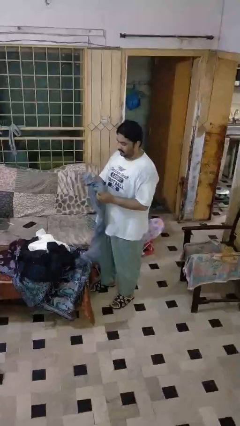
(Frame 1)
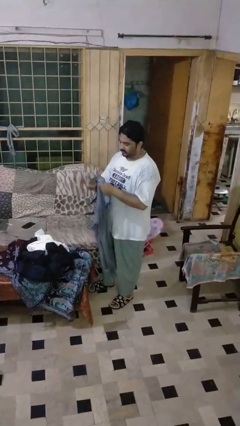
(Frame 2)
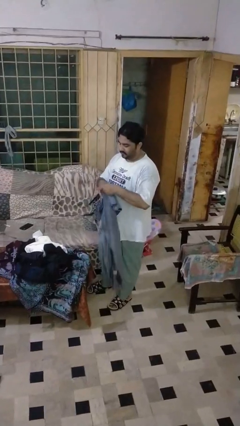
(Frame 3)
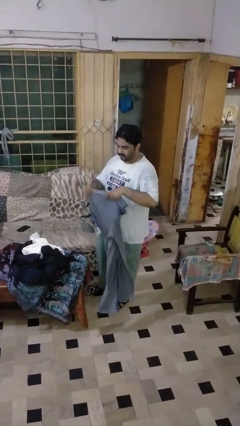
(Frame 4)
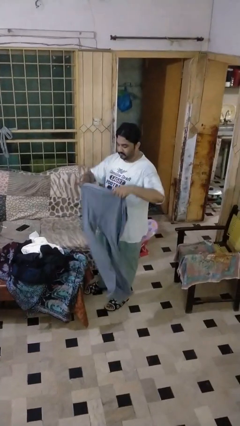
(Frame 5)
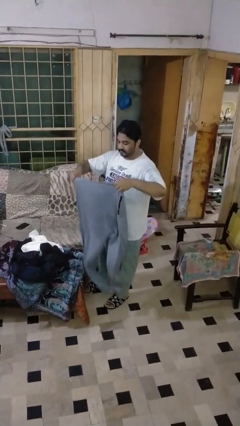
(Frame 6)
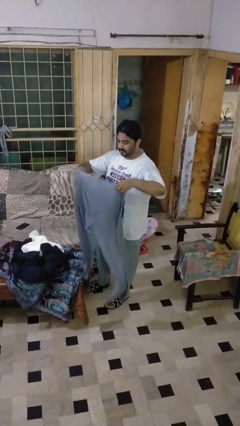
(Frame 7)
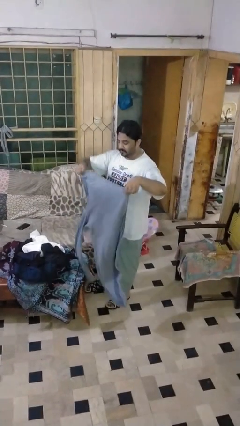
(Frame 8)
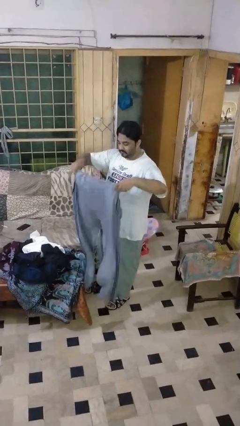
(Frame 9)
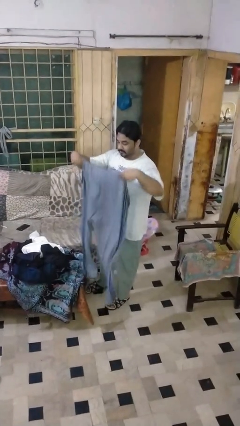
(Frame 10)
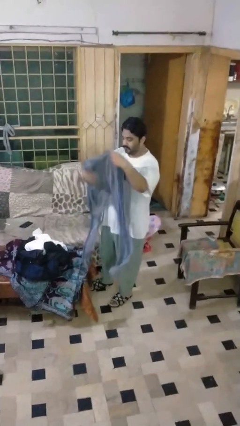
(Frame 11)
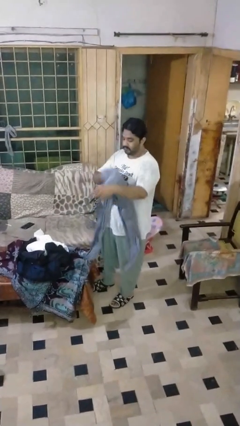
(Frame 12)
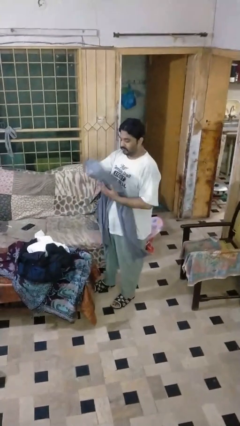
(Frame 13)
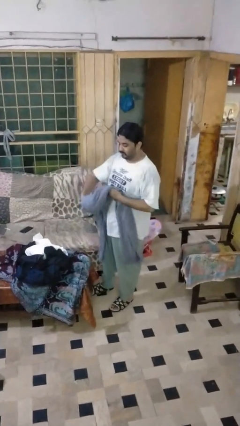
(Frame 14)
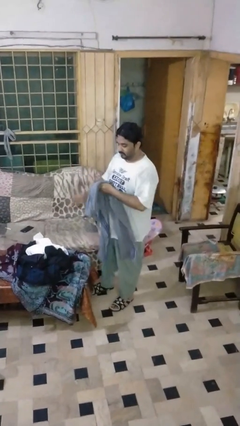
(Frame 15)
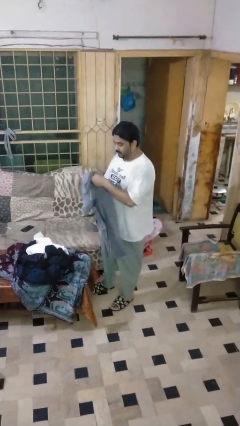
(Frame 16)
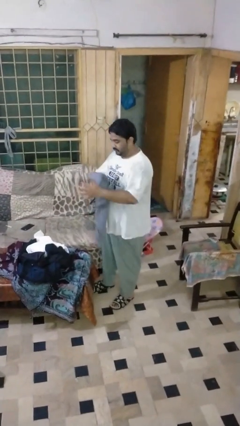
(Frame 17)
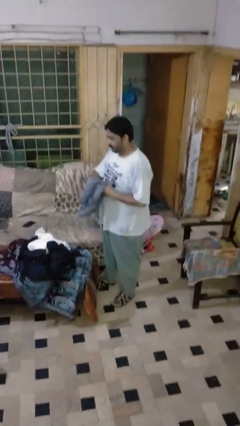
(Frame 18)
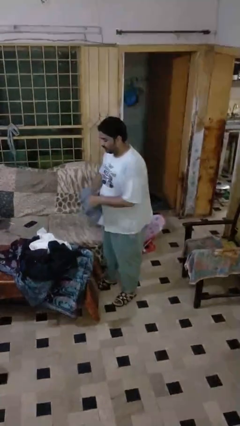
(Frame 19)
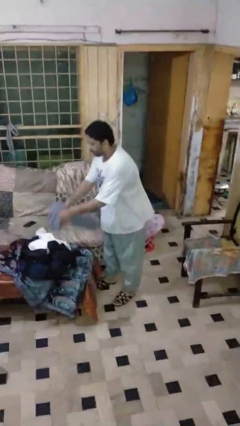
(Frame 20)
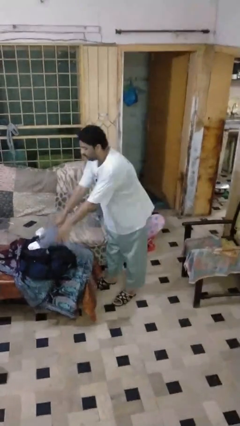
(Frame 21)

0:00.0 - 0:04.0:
person folds pants

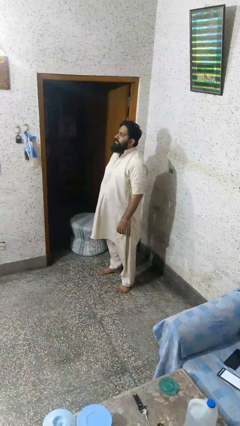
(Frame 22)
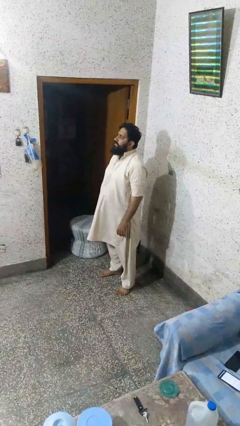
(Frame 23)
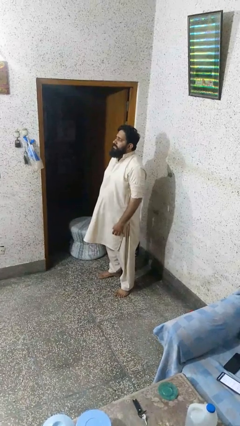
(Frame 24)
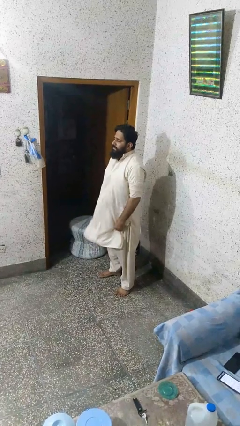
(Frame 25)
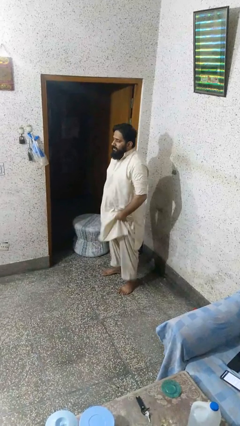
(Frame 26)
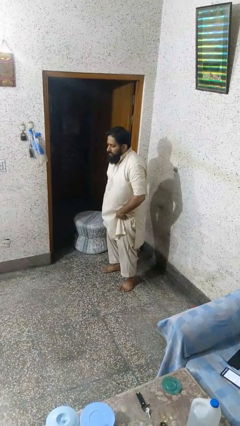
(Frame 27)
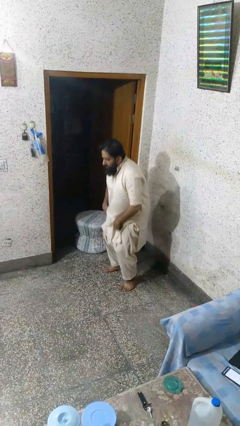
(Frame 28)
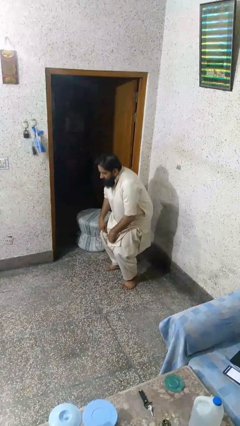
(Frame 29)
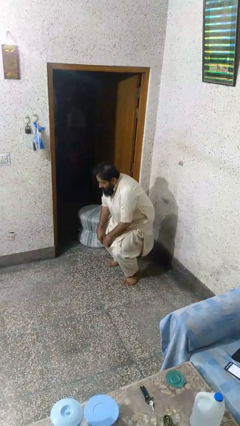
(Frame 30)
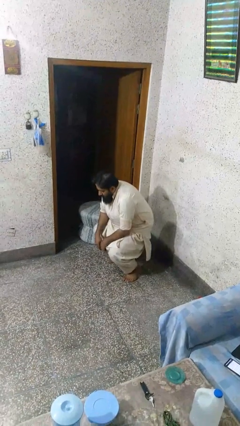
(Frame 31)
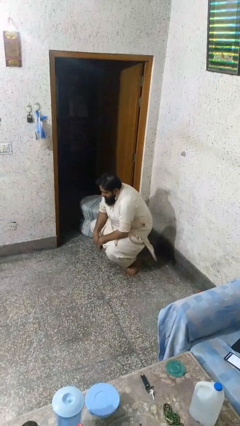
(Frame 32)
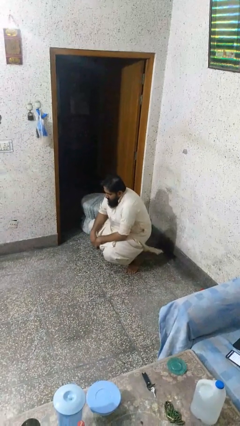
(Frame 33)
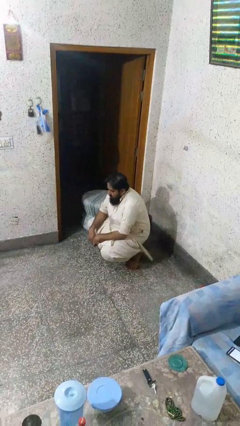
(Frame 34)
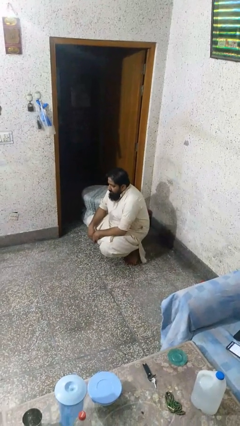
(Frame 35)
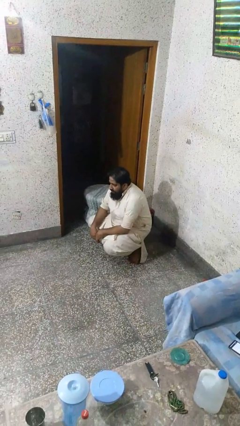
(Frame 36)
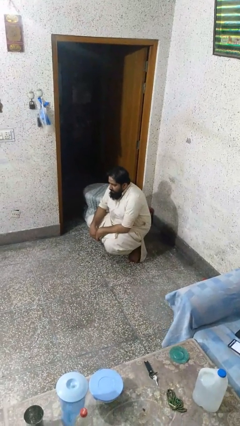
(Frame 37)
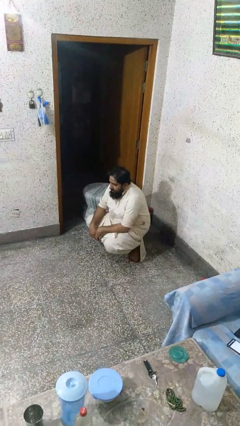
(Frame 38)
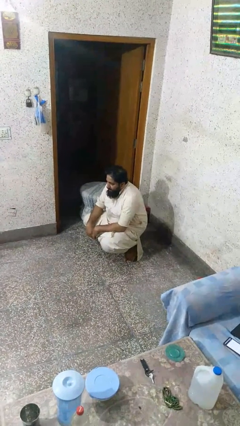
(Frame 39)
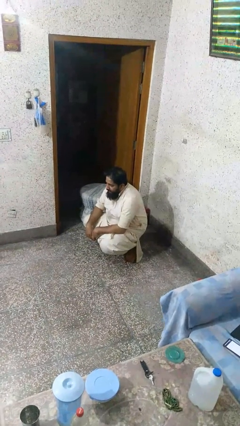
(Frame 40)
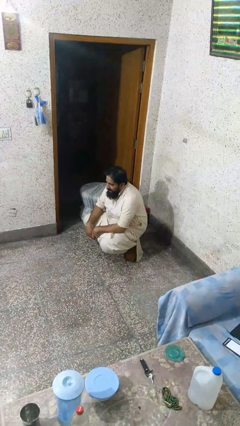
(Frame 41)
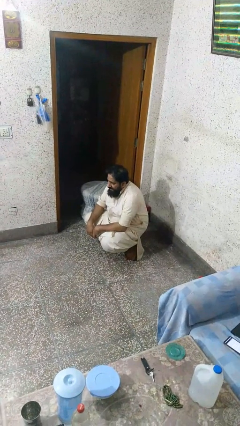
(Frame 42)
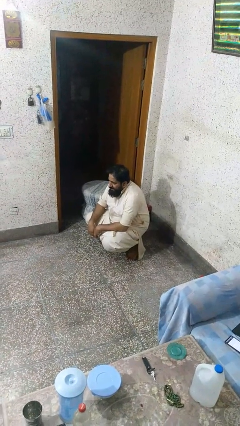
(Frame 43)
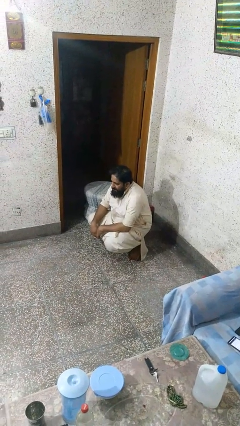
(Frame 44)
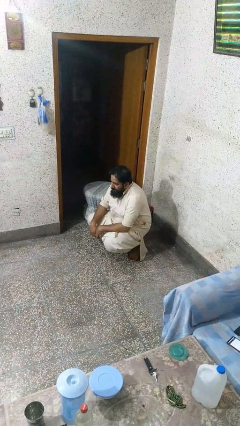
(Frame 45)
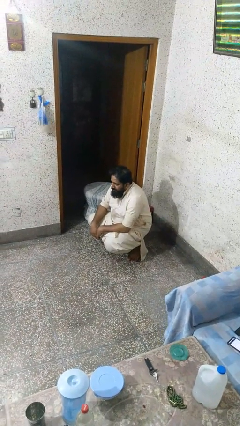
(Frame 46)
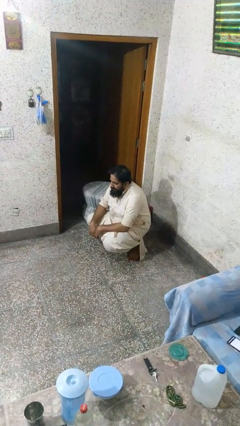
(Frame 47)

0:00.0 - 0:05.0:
person squats

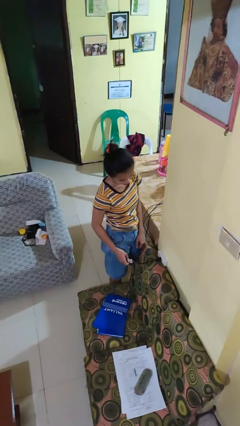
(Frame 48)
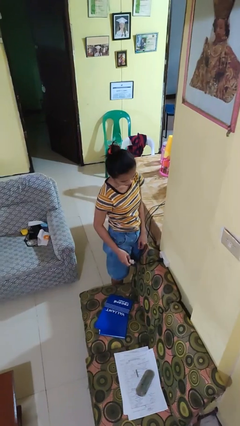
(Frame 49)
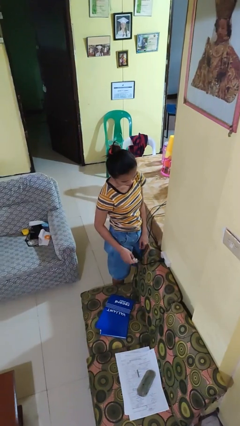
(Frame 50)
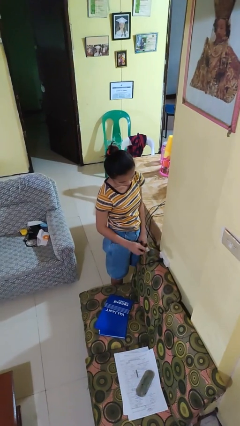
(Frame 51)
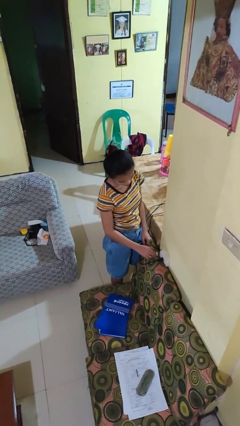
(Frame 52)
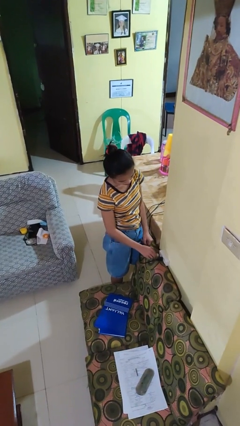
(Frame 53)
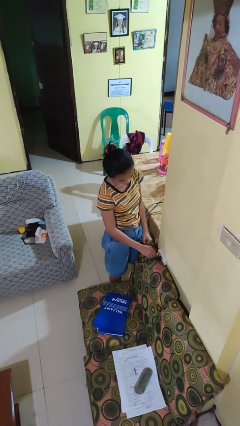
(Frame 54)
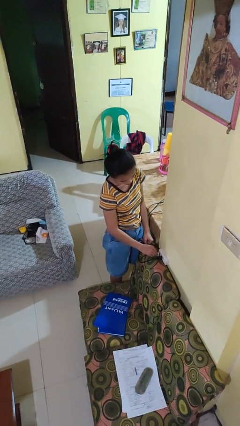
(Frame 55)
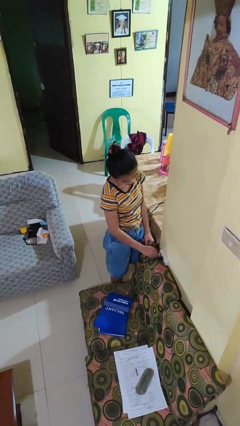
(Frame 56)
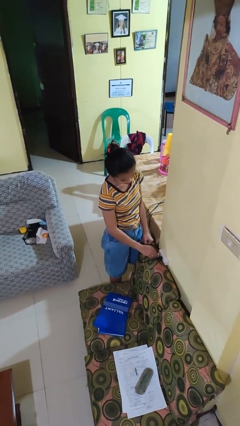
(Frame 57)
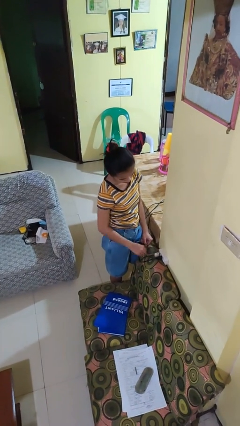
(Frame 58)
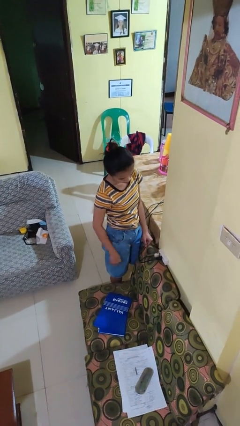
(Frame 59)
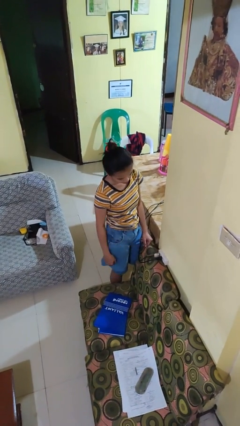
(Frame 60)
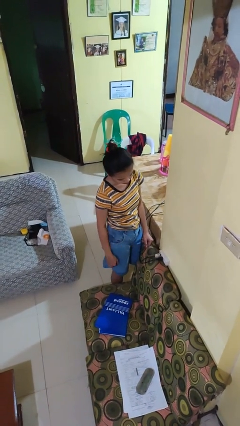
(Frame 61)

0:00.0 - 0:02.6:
person plugs into electrical socket

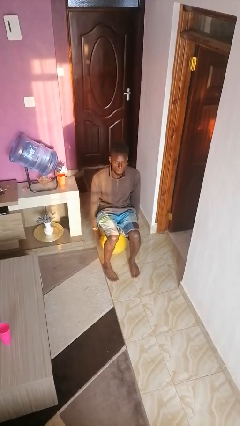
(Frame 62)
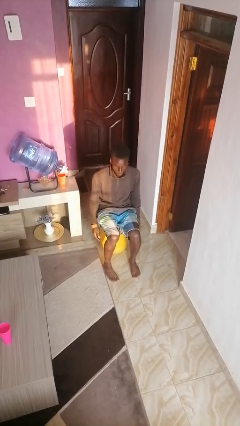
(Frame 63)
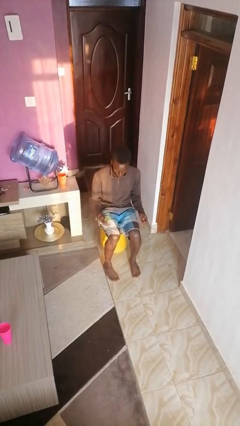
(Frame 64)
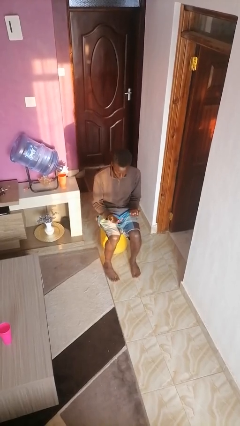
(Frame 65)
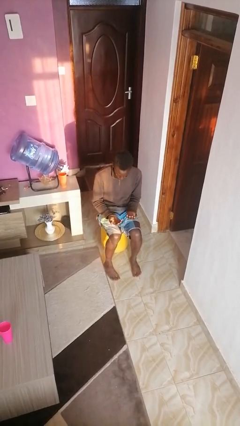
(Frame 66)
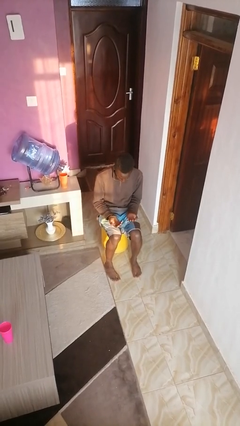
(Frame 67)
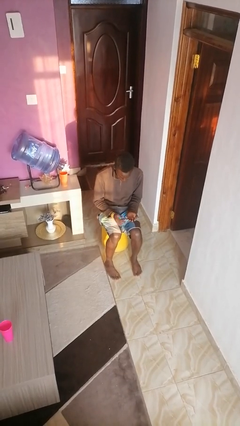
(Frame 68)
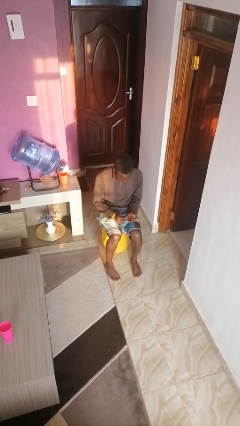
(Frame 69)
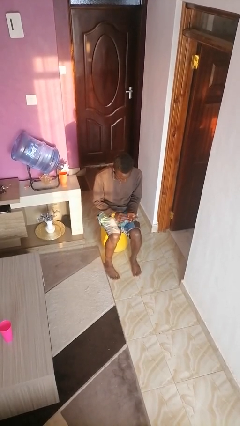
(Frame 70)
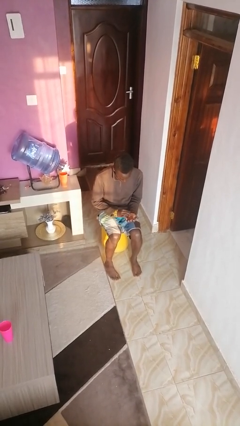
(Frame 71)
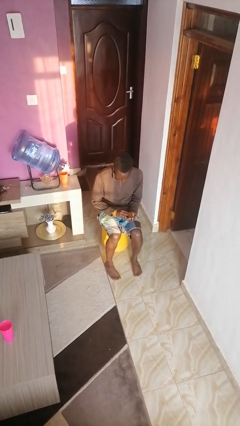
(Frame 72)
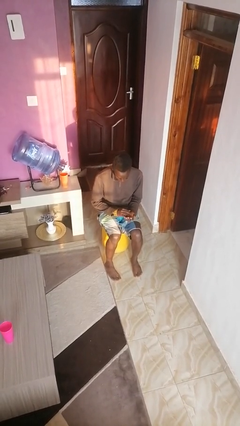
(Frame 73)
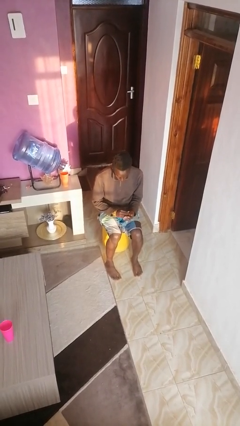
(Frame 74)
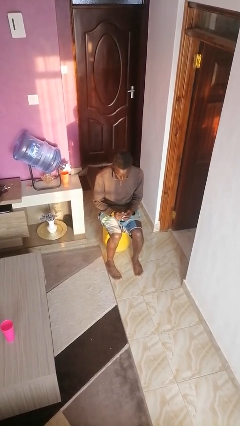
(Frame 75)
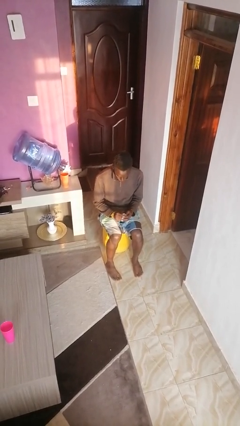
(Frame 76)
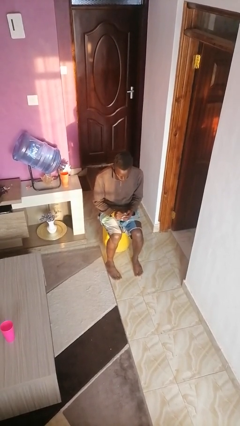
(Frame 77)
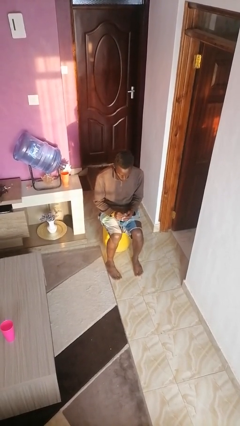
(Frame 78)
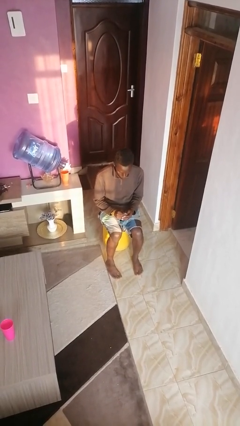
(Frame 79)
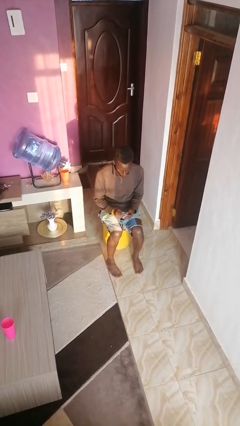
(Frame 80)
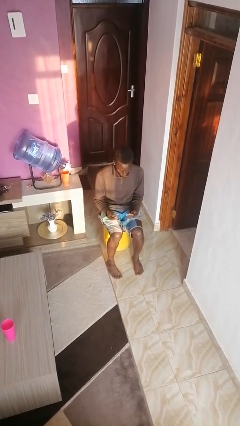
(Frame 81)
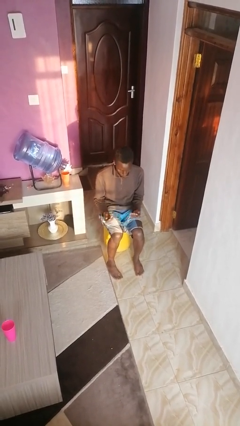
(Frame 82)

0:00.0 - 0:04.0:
person looks at hands in lap

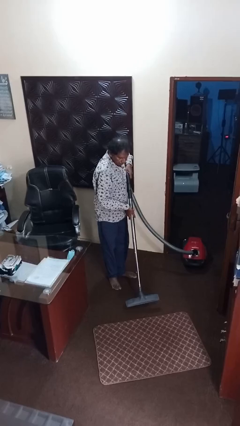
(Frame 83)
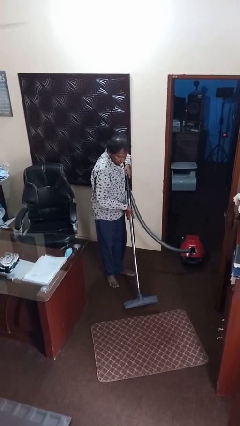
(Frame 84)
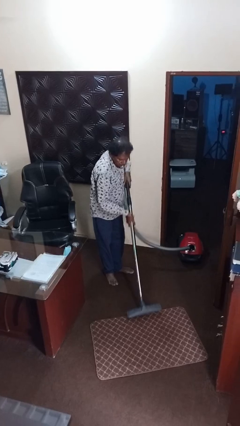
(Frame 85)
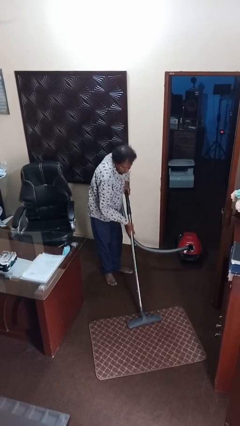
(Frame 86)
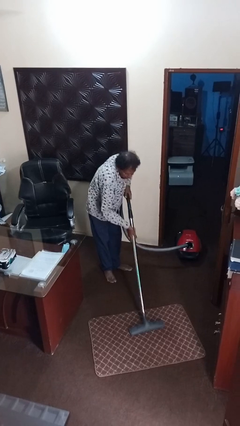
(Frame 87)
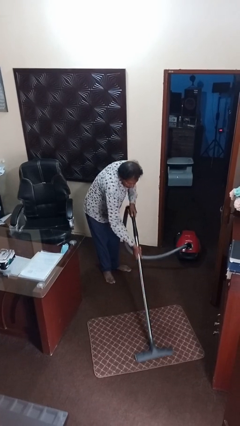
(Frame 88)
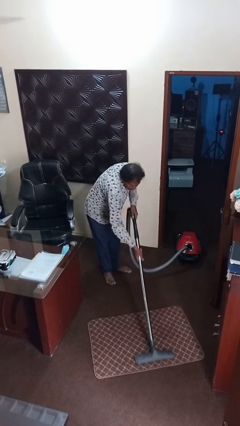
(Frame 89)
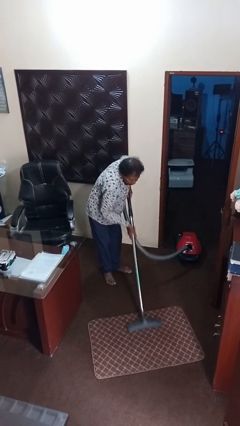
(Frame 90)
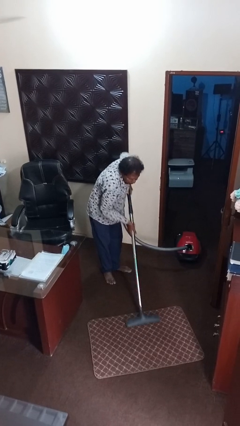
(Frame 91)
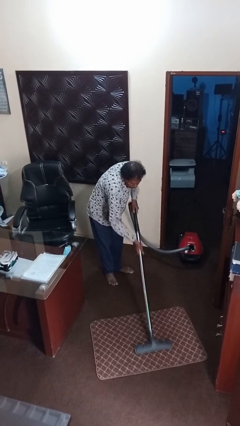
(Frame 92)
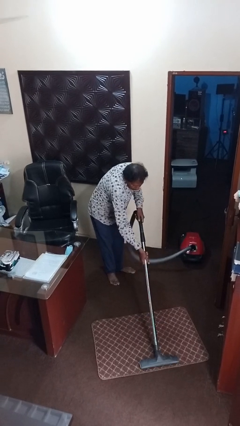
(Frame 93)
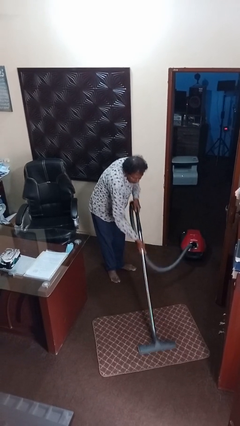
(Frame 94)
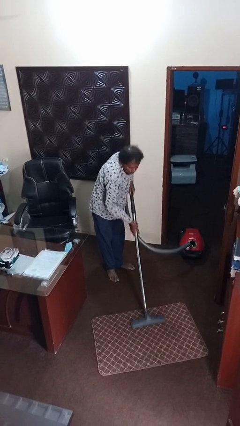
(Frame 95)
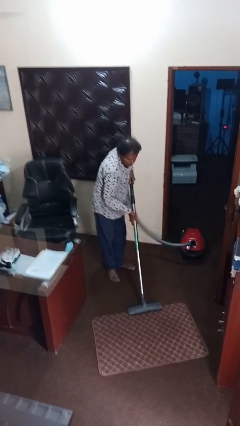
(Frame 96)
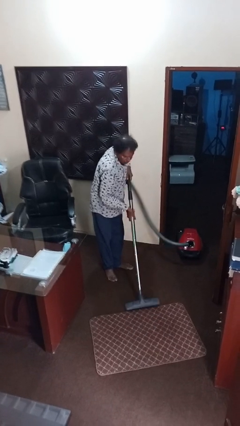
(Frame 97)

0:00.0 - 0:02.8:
person vacuums carpet
